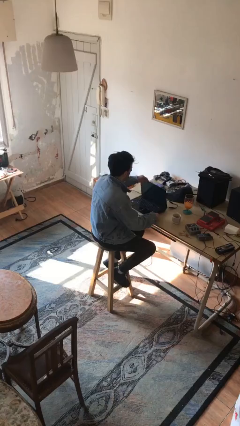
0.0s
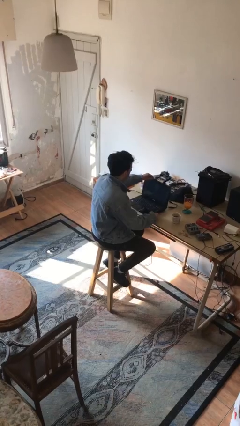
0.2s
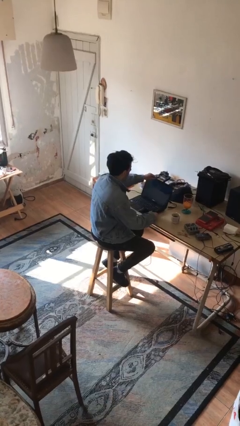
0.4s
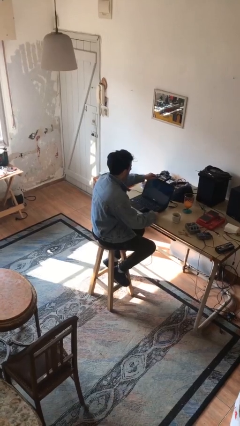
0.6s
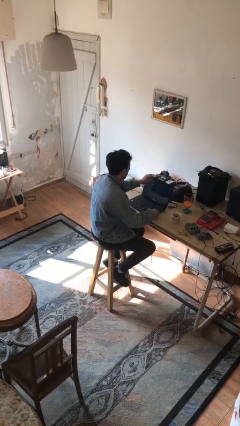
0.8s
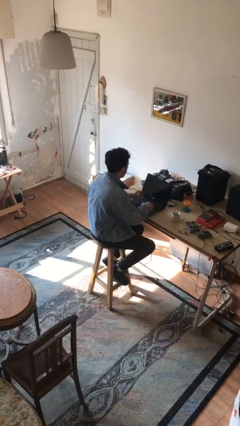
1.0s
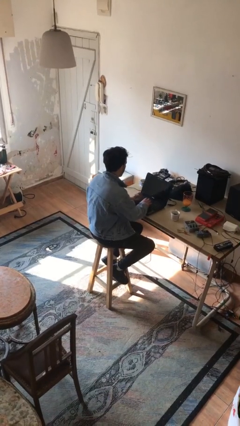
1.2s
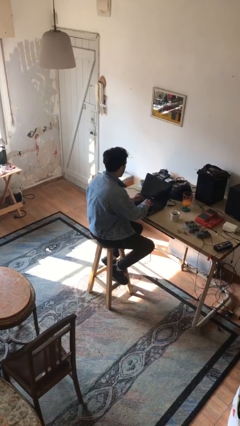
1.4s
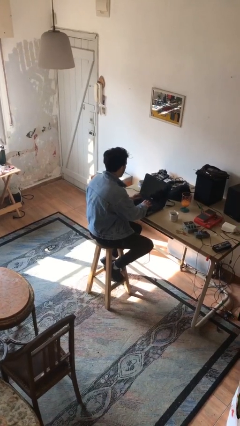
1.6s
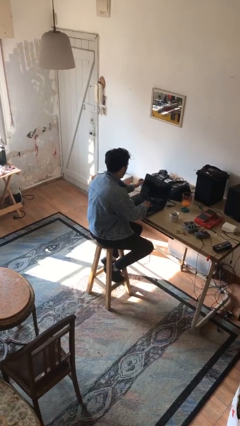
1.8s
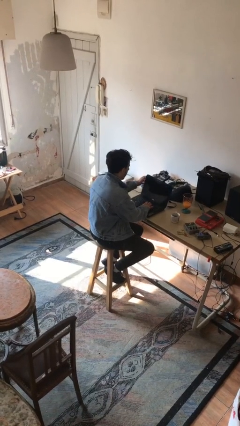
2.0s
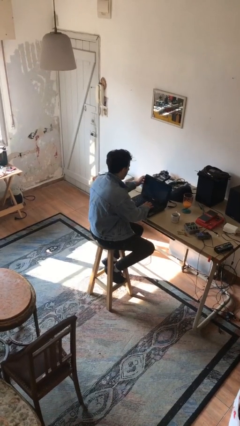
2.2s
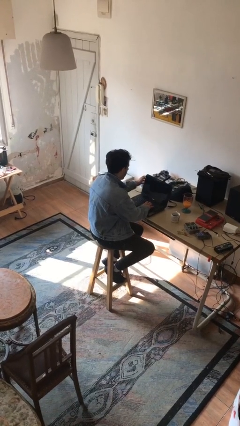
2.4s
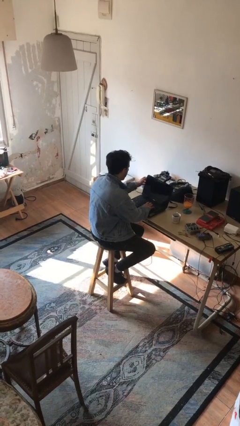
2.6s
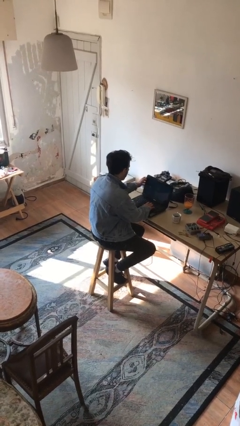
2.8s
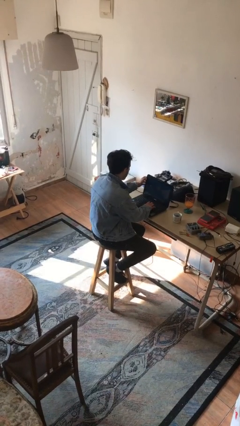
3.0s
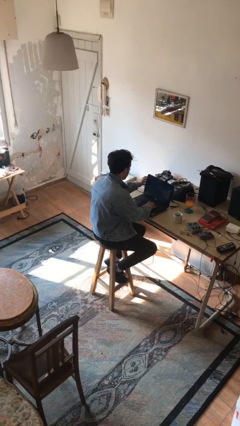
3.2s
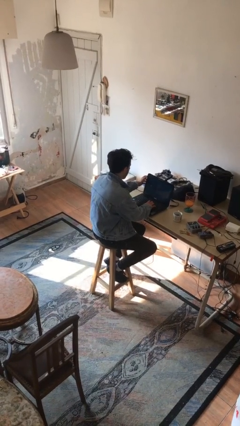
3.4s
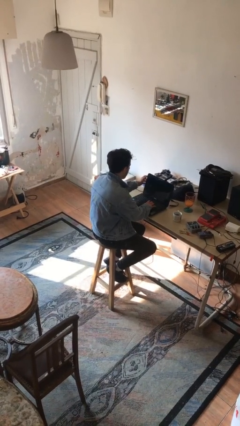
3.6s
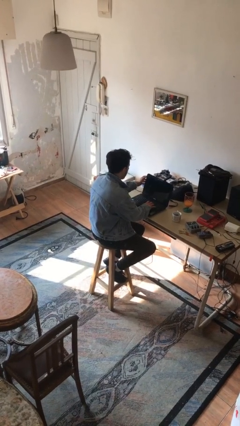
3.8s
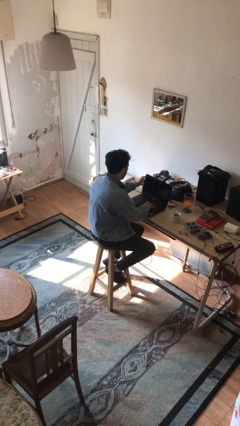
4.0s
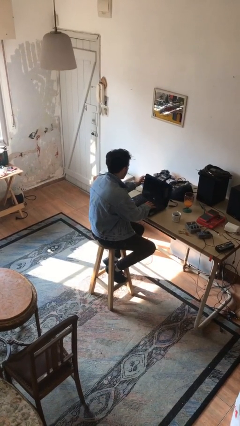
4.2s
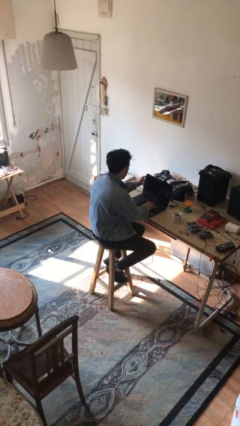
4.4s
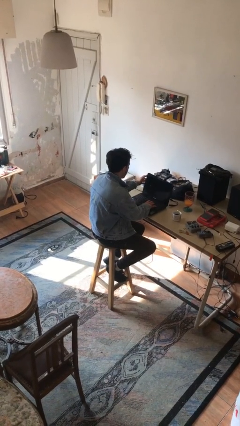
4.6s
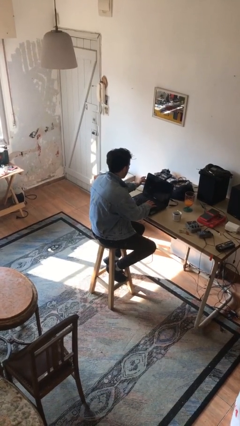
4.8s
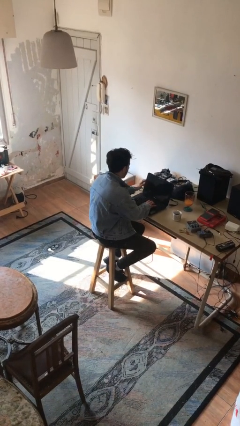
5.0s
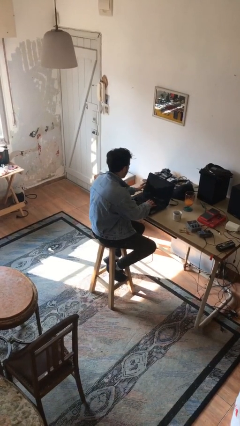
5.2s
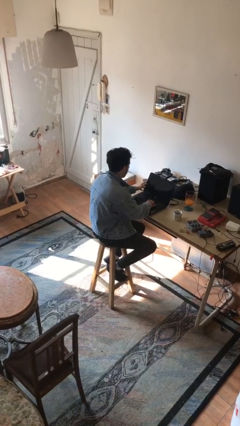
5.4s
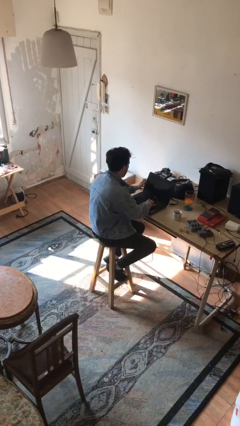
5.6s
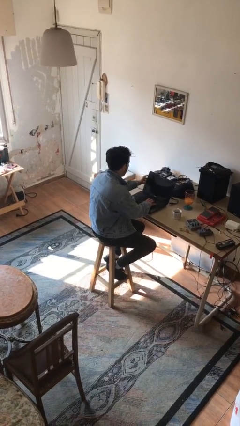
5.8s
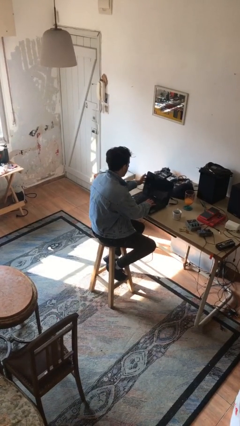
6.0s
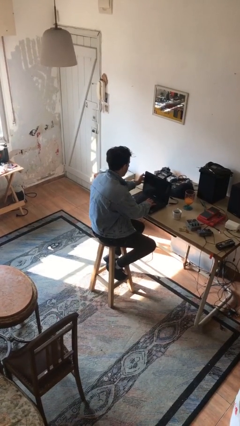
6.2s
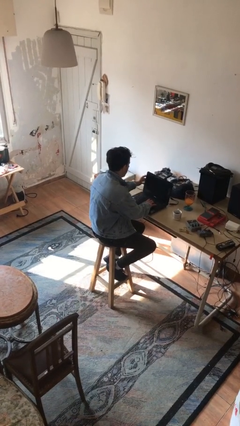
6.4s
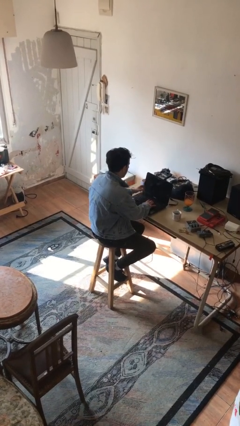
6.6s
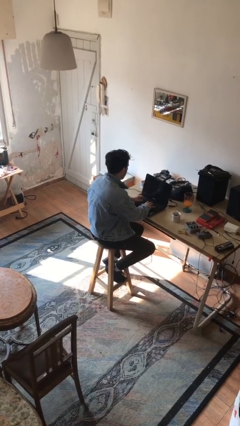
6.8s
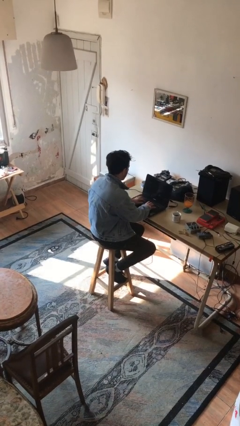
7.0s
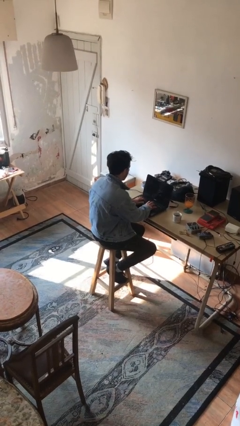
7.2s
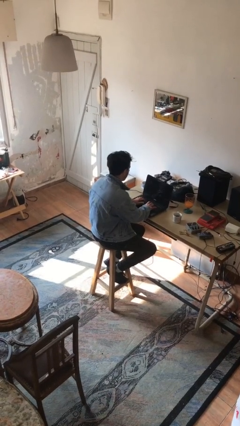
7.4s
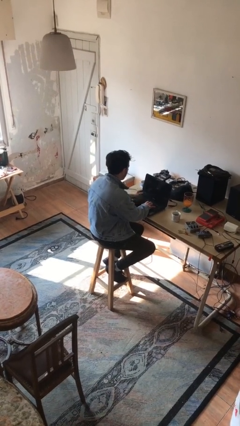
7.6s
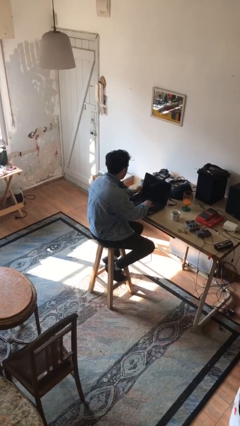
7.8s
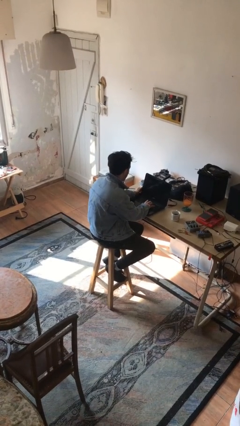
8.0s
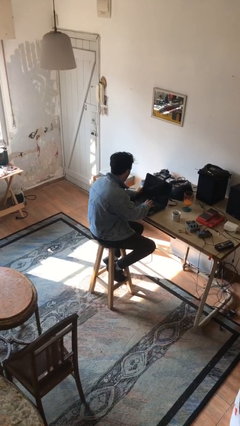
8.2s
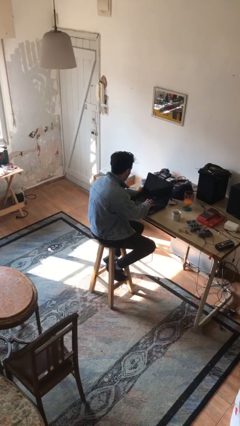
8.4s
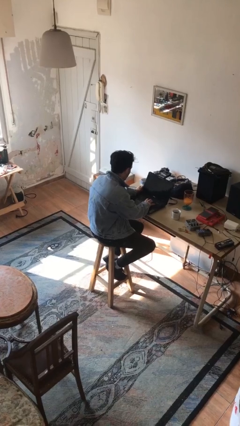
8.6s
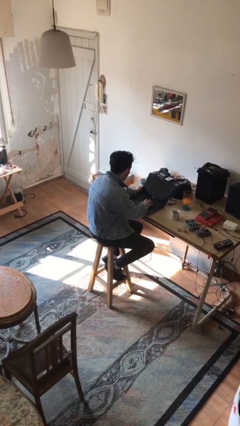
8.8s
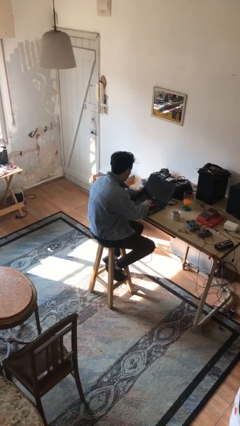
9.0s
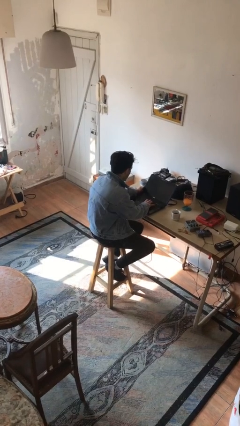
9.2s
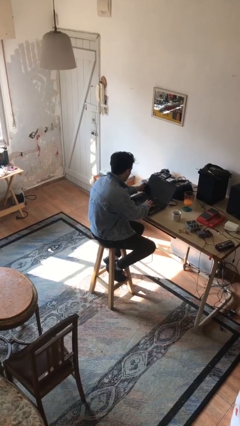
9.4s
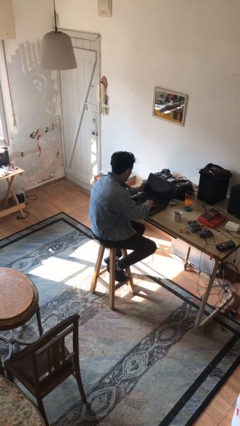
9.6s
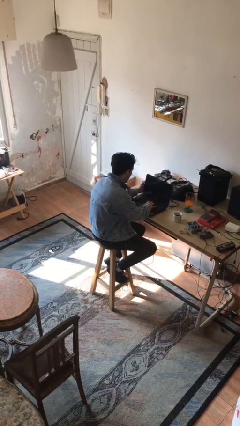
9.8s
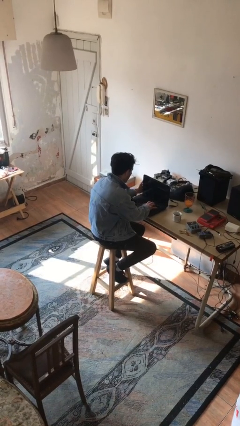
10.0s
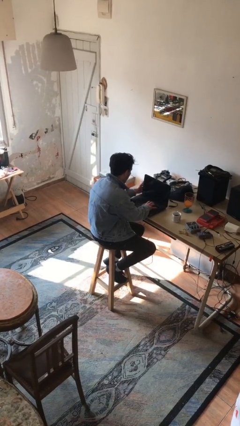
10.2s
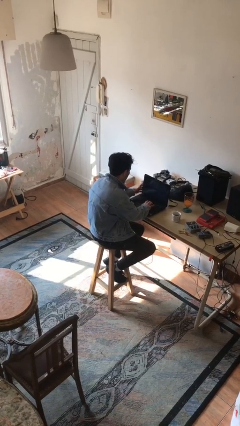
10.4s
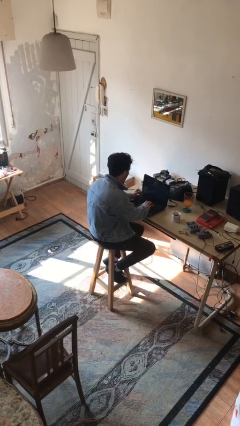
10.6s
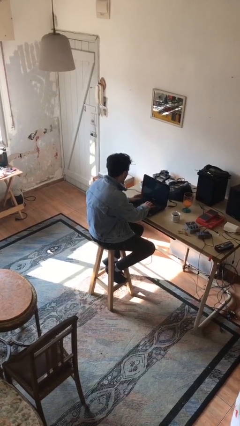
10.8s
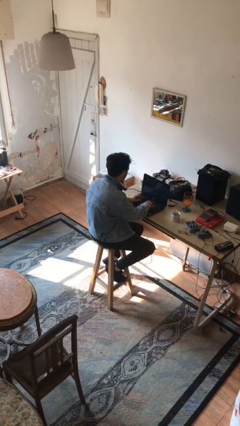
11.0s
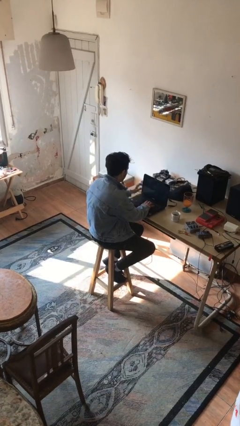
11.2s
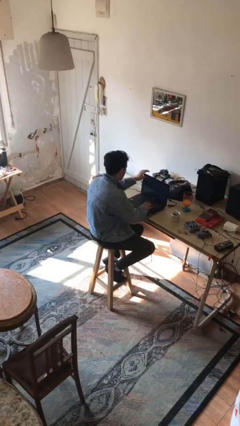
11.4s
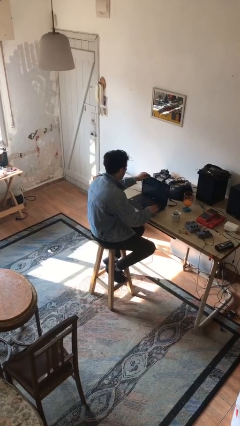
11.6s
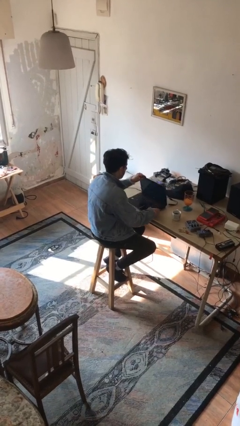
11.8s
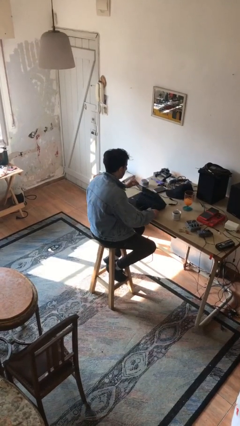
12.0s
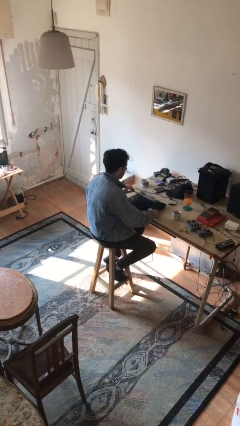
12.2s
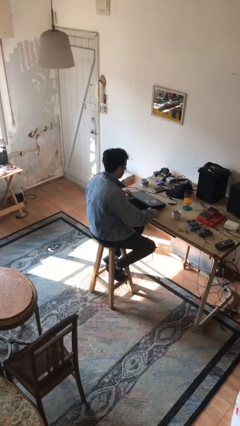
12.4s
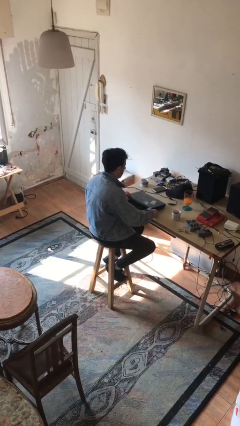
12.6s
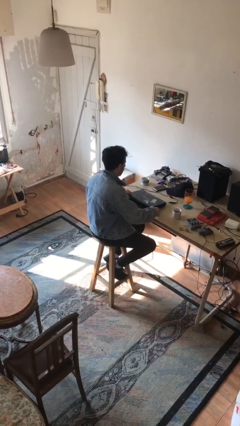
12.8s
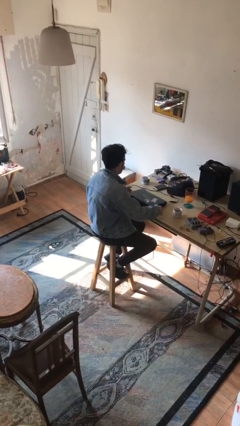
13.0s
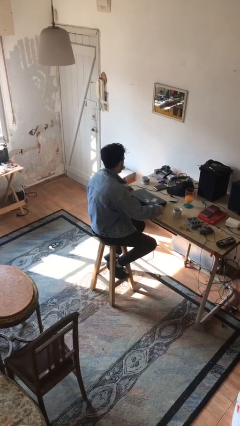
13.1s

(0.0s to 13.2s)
person interacts with laptop

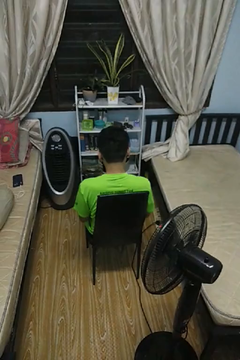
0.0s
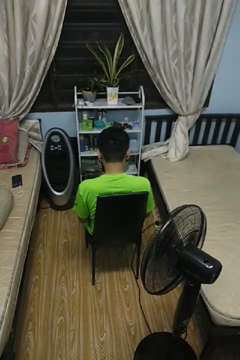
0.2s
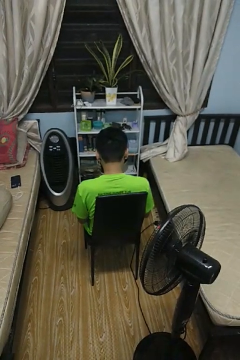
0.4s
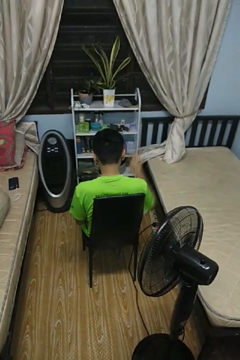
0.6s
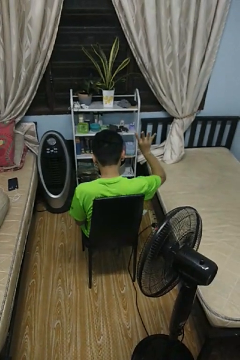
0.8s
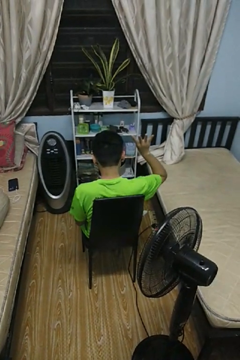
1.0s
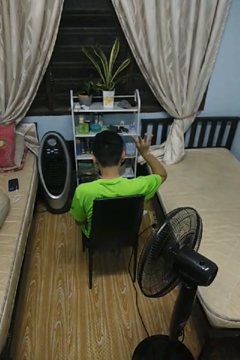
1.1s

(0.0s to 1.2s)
person gestures number four

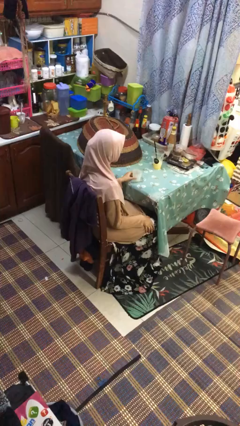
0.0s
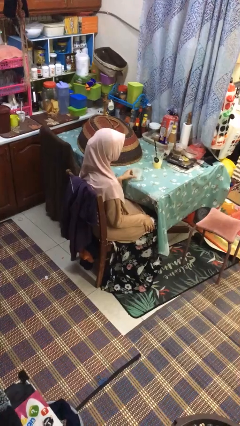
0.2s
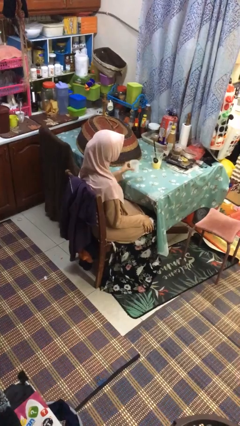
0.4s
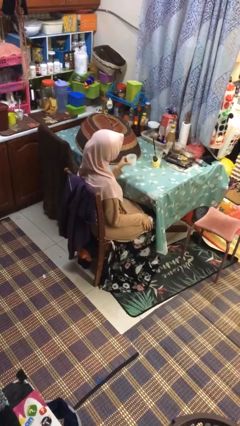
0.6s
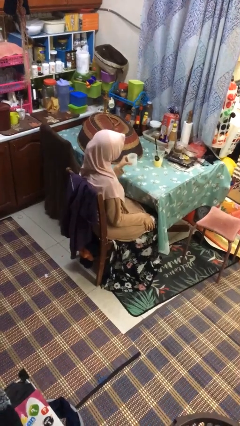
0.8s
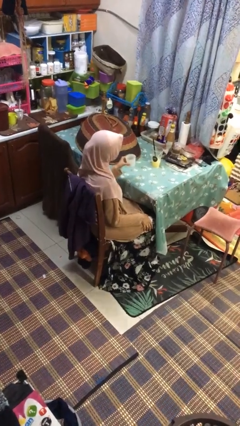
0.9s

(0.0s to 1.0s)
person picks up object from table

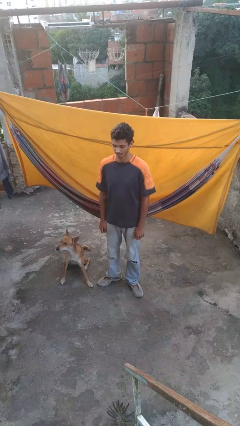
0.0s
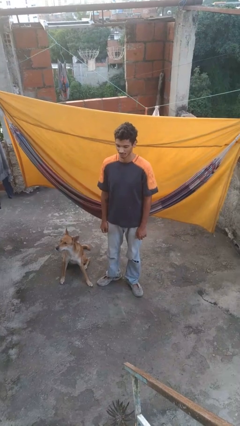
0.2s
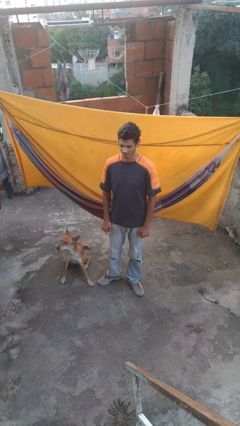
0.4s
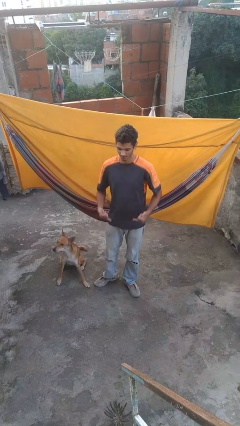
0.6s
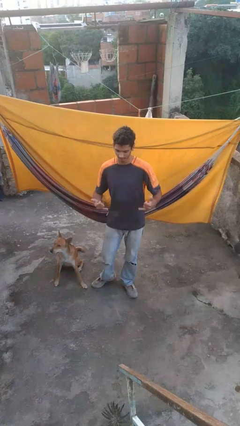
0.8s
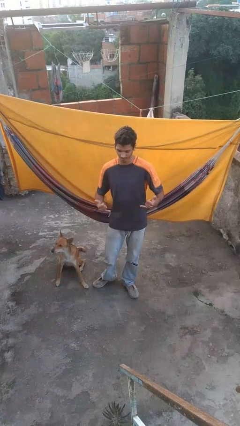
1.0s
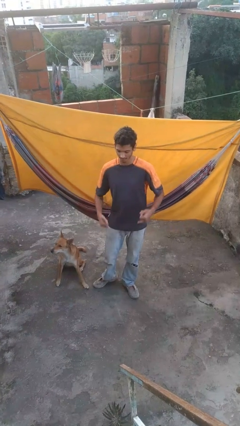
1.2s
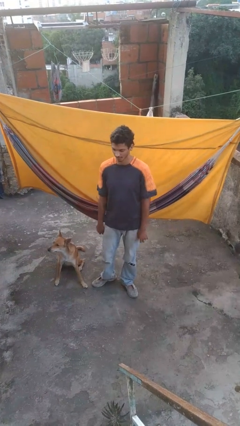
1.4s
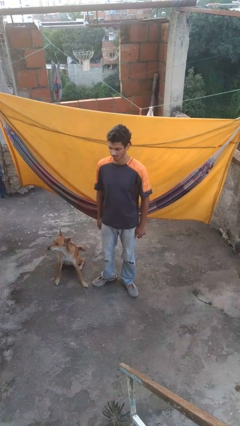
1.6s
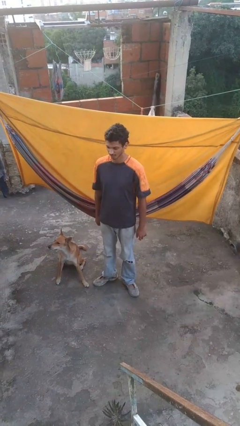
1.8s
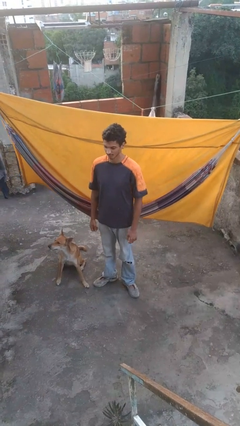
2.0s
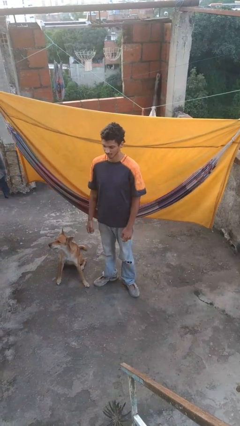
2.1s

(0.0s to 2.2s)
person gestures hang loose

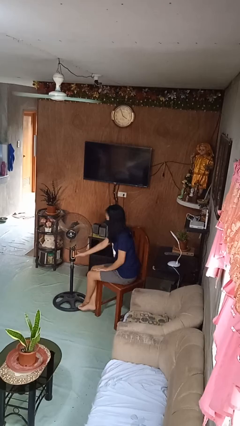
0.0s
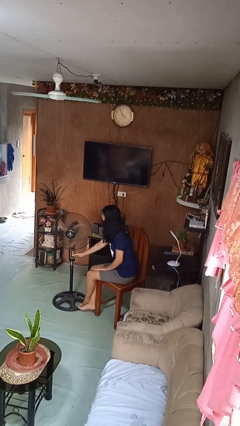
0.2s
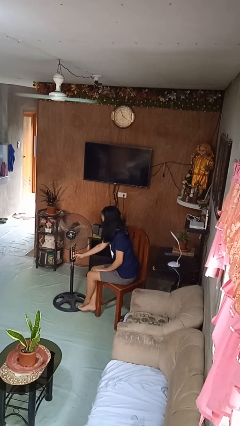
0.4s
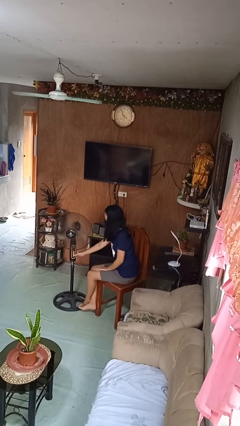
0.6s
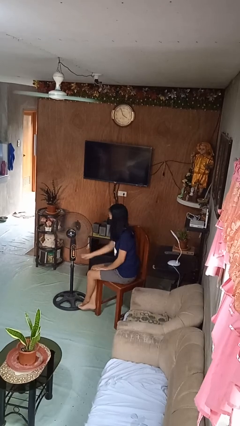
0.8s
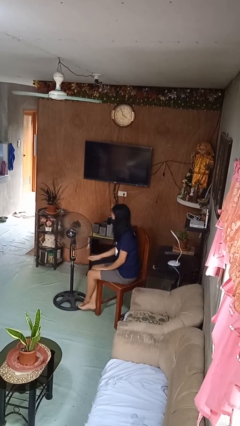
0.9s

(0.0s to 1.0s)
person turns on fan
